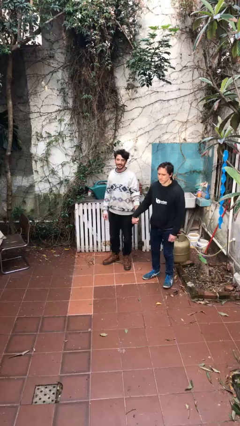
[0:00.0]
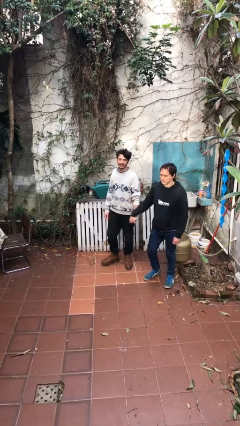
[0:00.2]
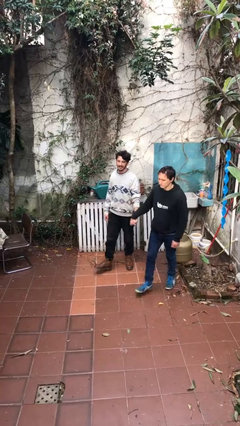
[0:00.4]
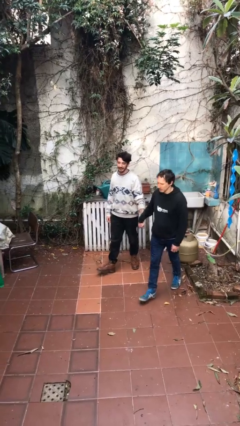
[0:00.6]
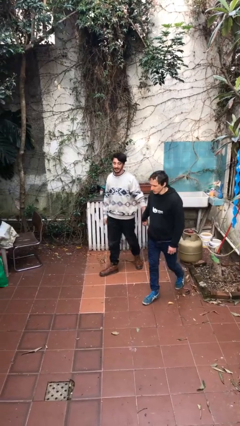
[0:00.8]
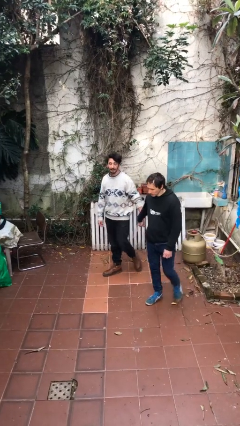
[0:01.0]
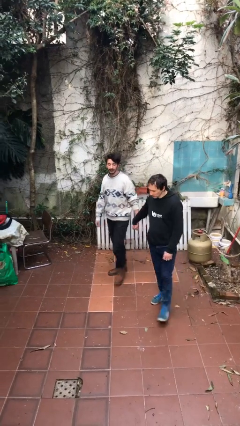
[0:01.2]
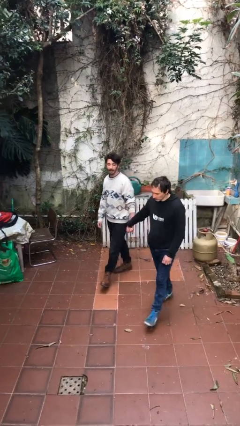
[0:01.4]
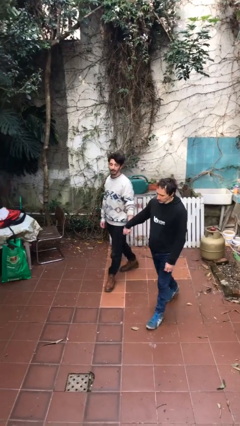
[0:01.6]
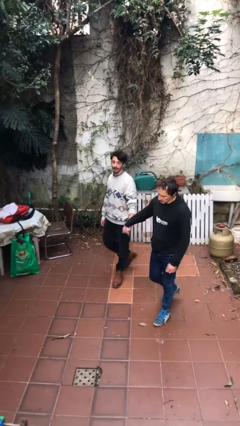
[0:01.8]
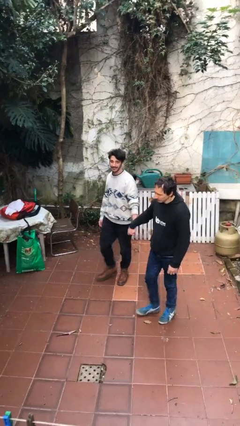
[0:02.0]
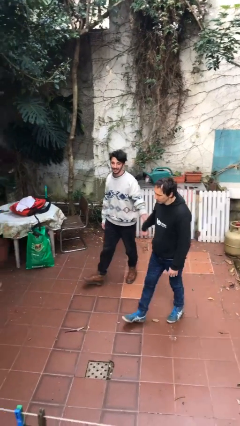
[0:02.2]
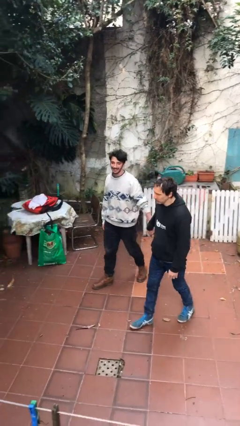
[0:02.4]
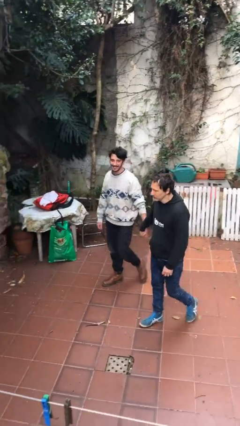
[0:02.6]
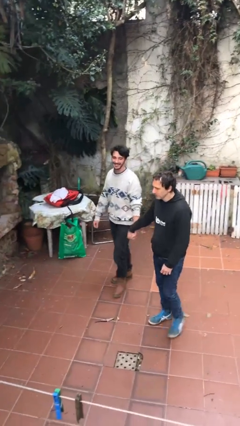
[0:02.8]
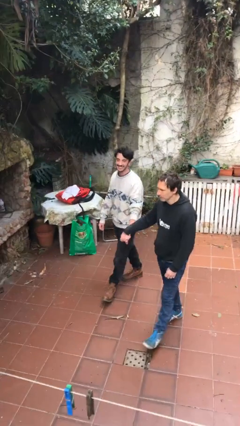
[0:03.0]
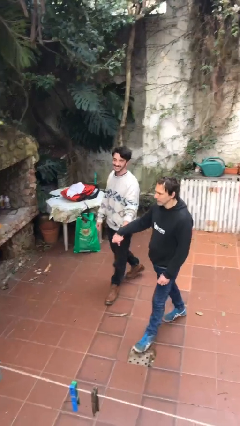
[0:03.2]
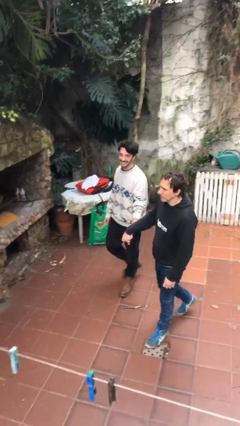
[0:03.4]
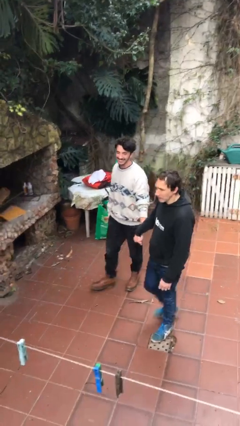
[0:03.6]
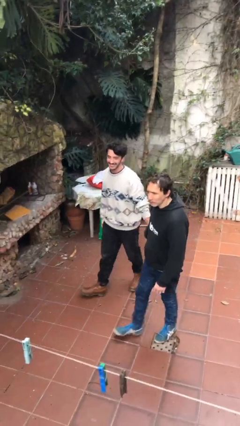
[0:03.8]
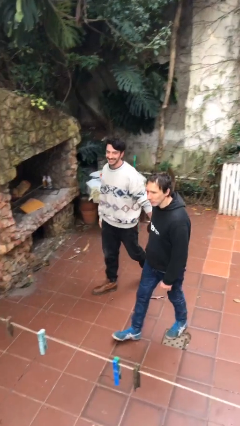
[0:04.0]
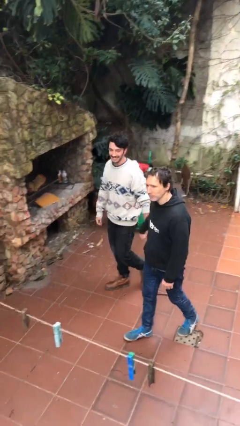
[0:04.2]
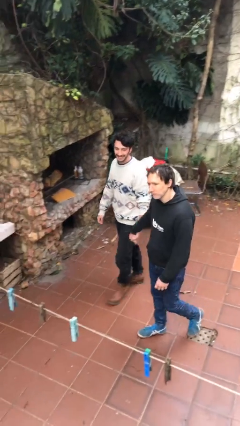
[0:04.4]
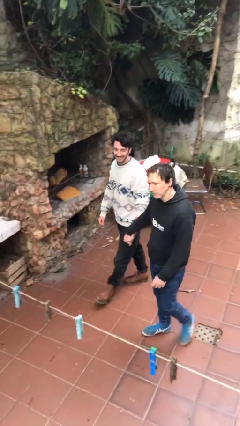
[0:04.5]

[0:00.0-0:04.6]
person holds hand

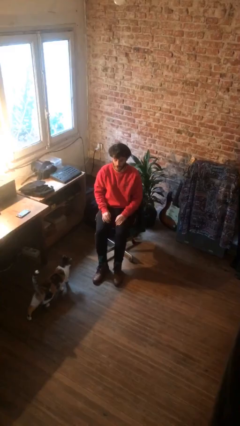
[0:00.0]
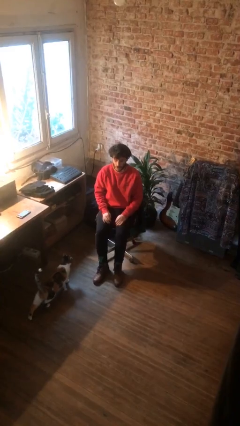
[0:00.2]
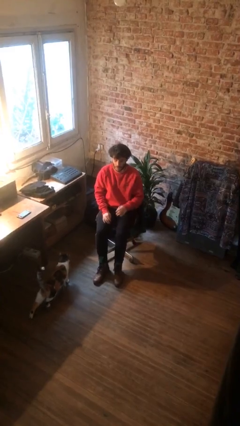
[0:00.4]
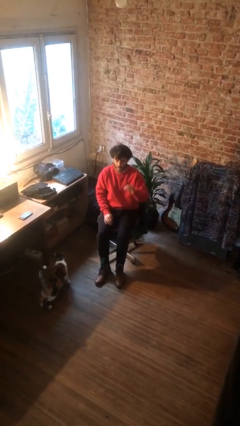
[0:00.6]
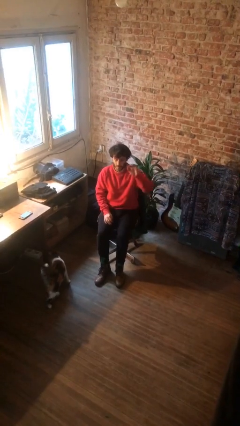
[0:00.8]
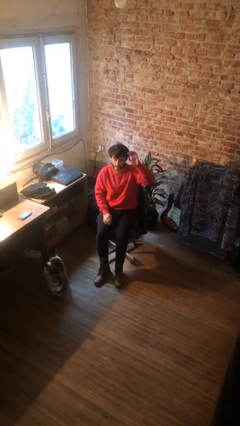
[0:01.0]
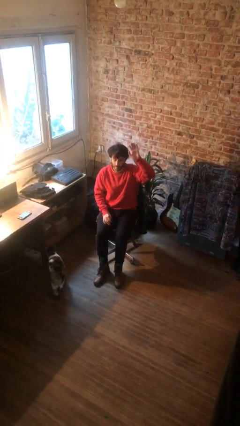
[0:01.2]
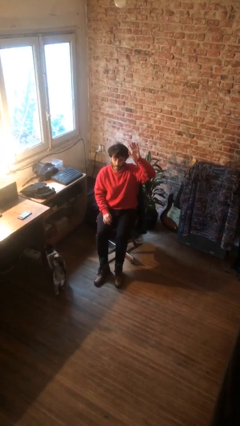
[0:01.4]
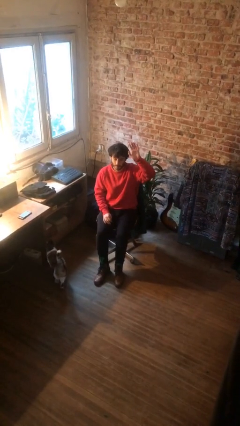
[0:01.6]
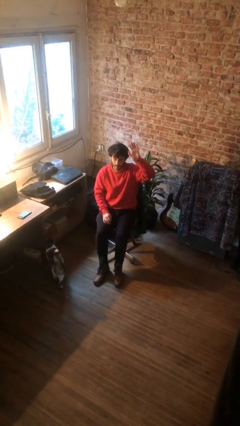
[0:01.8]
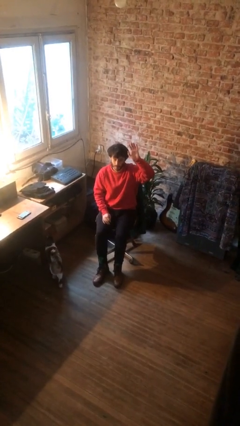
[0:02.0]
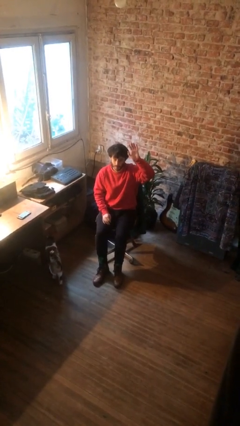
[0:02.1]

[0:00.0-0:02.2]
person gestures raise hand

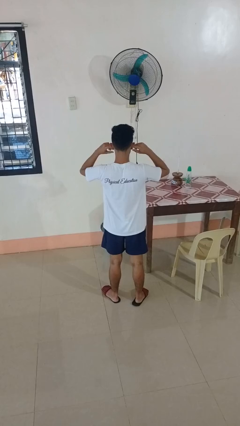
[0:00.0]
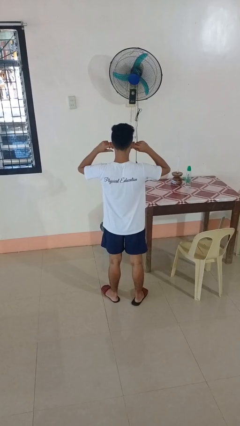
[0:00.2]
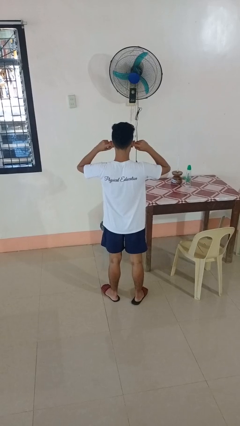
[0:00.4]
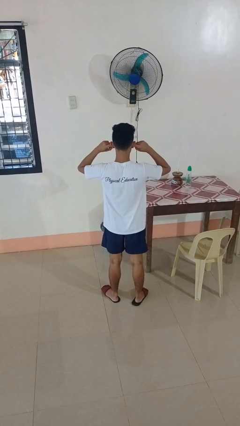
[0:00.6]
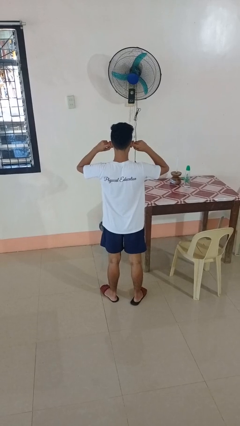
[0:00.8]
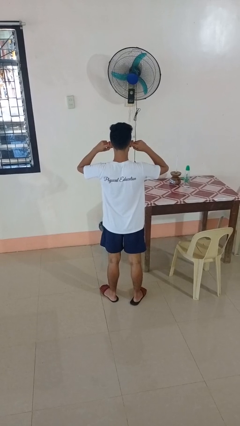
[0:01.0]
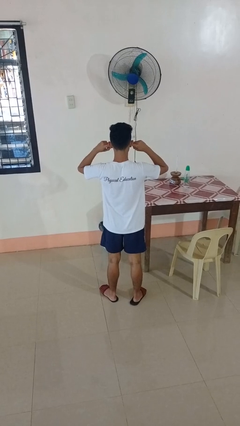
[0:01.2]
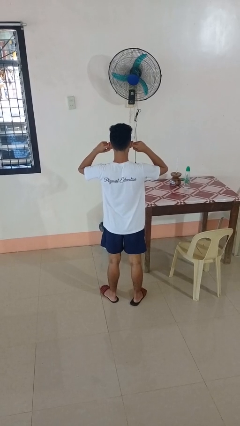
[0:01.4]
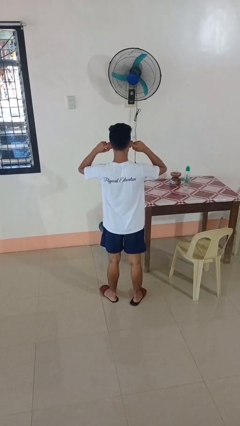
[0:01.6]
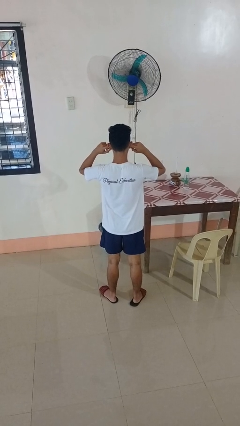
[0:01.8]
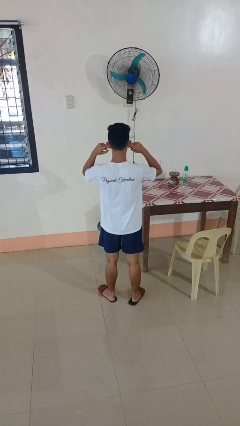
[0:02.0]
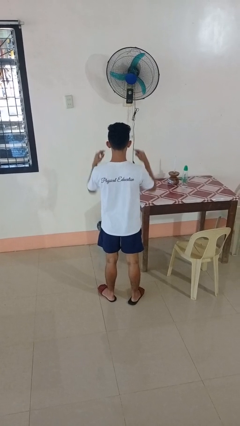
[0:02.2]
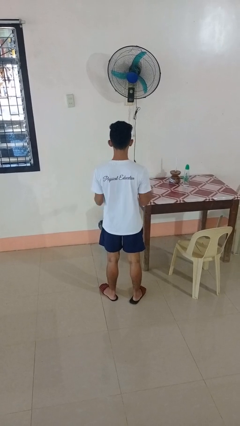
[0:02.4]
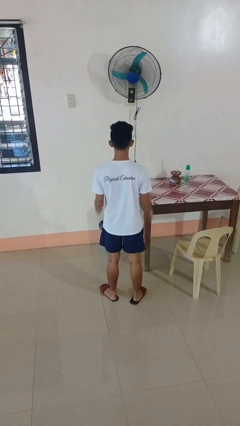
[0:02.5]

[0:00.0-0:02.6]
person puts fingers in ear

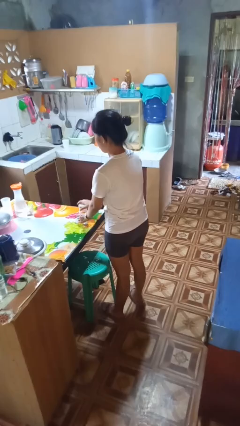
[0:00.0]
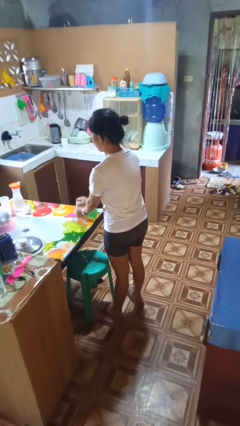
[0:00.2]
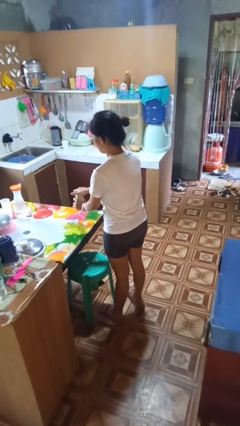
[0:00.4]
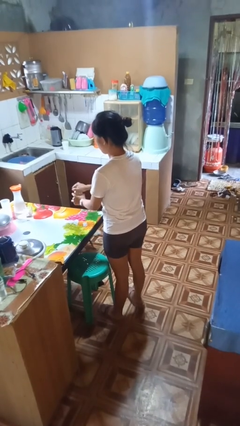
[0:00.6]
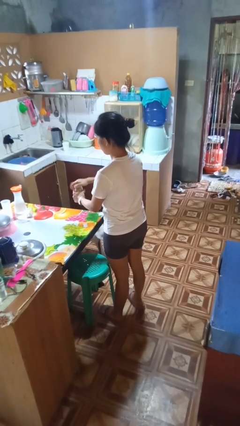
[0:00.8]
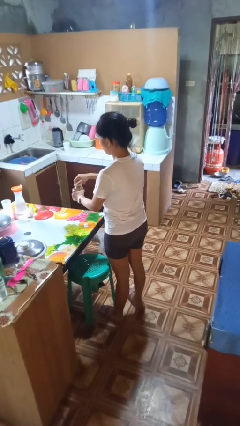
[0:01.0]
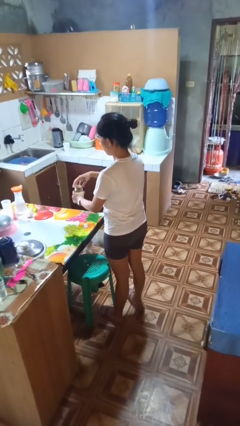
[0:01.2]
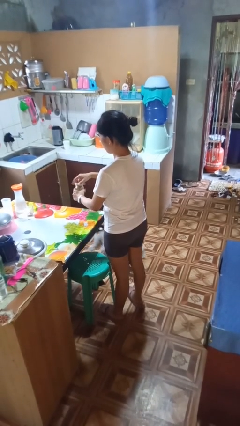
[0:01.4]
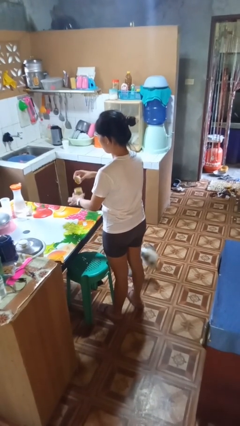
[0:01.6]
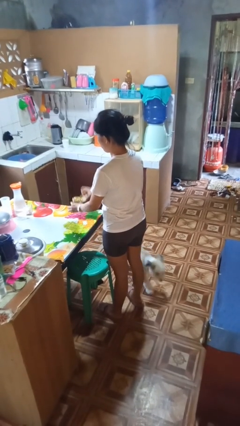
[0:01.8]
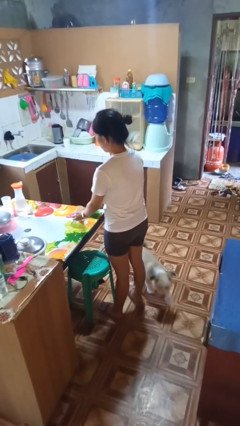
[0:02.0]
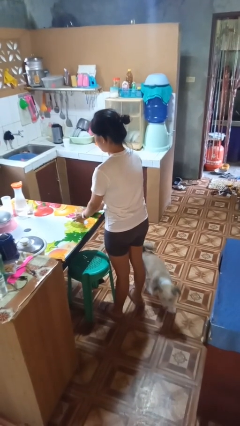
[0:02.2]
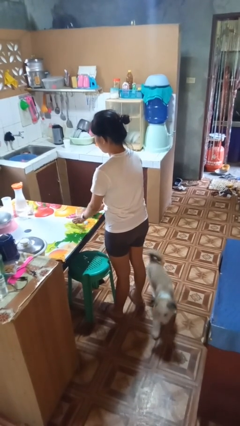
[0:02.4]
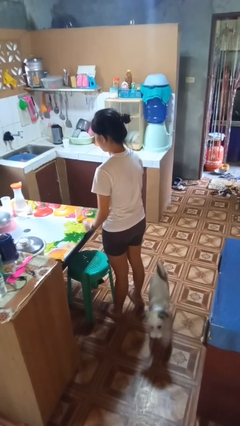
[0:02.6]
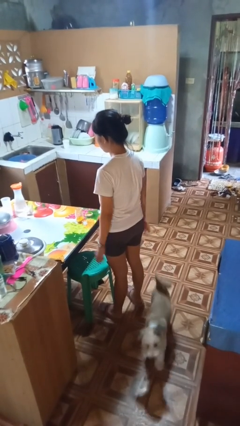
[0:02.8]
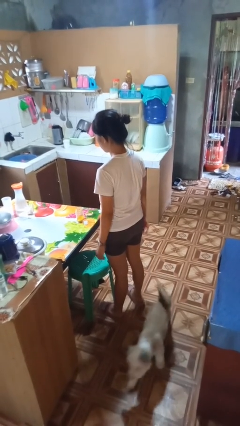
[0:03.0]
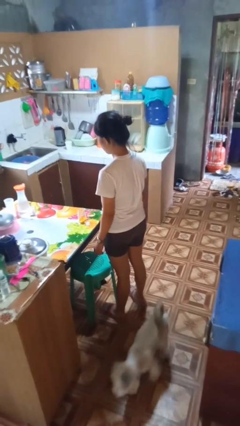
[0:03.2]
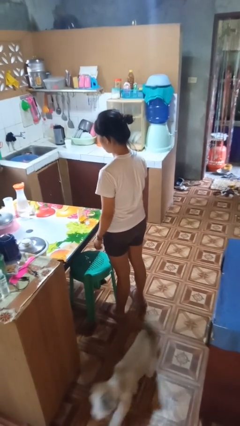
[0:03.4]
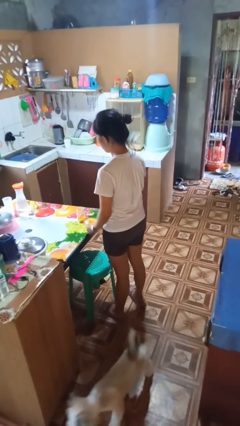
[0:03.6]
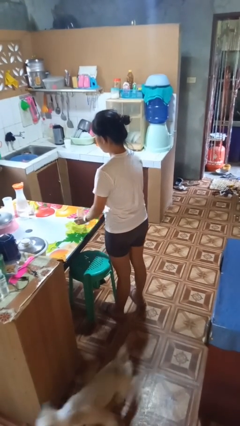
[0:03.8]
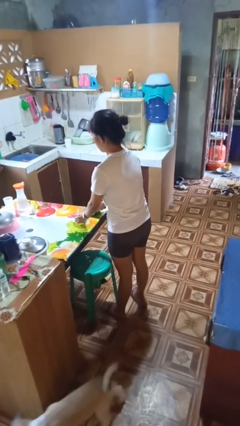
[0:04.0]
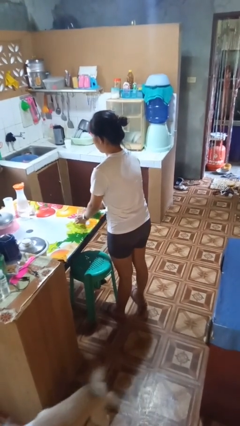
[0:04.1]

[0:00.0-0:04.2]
person opens jar

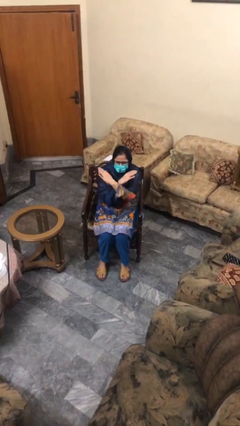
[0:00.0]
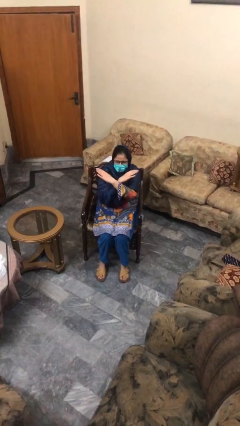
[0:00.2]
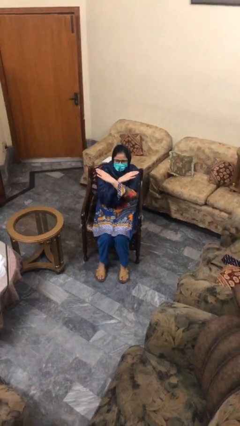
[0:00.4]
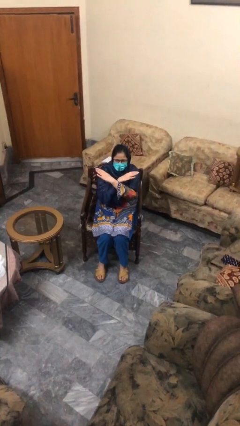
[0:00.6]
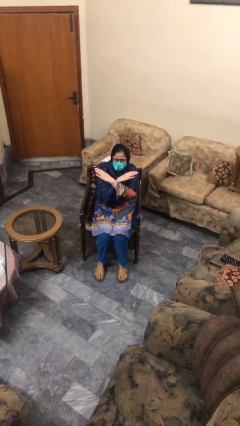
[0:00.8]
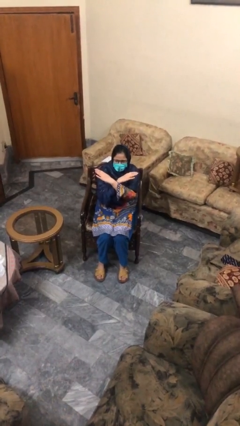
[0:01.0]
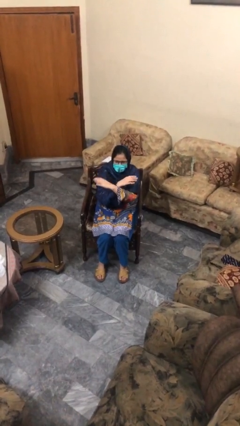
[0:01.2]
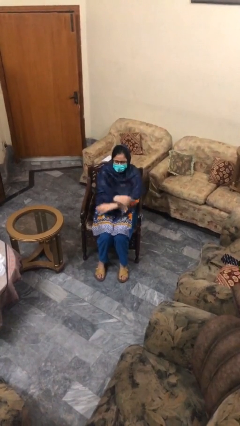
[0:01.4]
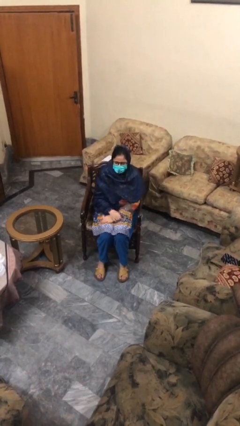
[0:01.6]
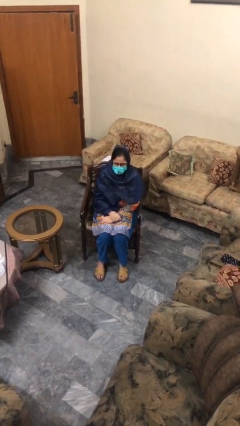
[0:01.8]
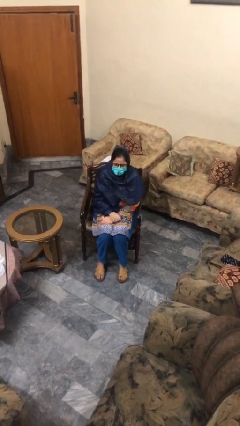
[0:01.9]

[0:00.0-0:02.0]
person gestures arms x

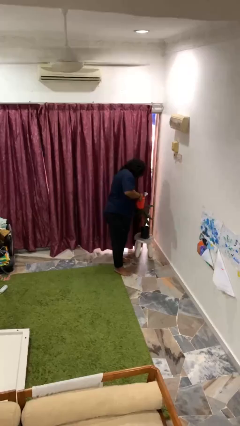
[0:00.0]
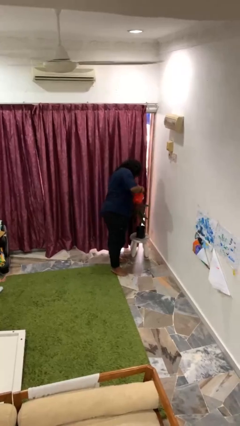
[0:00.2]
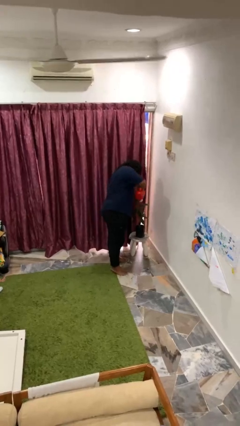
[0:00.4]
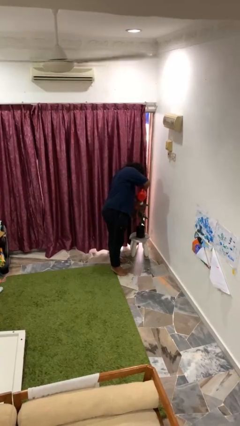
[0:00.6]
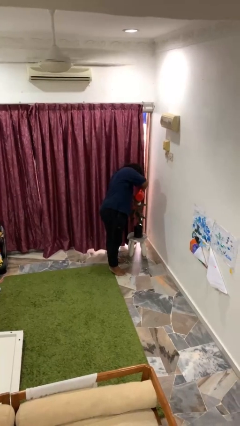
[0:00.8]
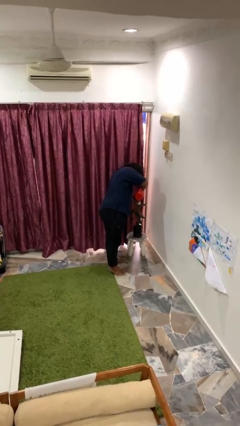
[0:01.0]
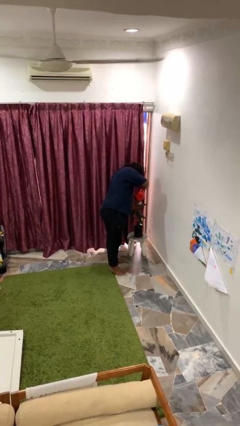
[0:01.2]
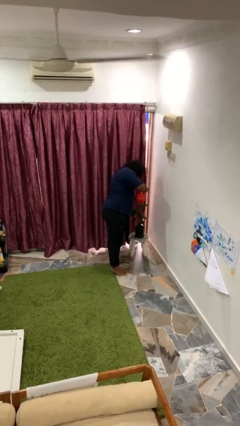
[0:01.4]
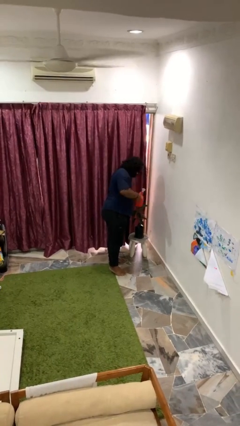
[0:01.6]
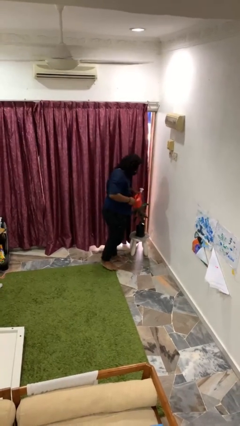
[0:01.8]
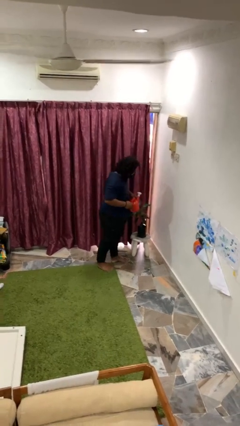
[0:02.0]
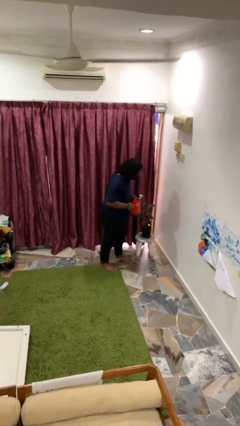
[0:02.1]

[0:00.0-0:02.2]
person waters houseplant
